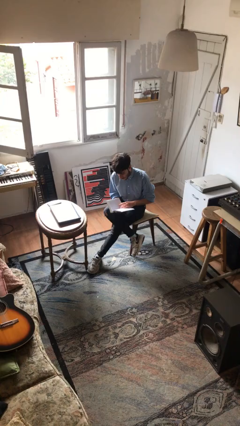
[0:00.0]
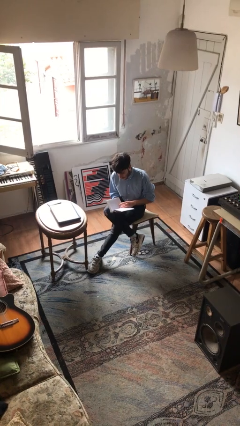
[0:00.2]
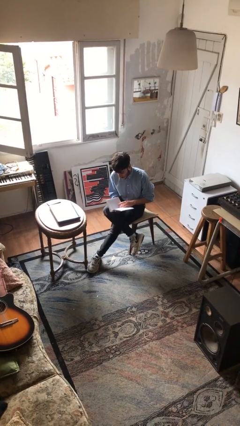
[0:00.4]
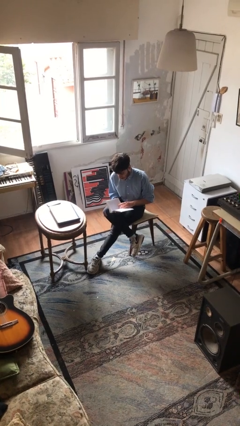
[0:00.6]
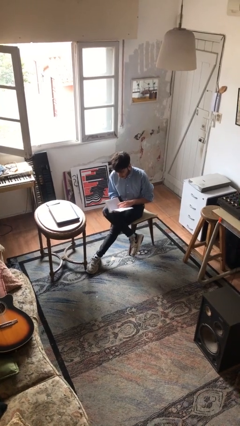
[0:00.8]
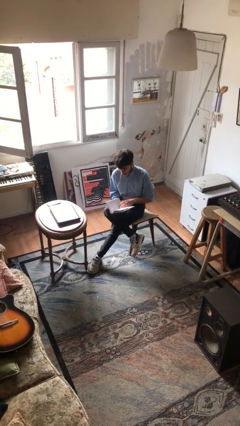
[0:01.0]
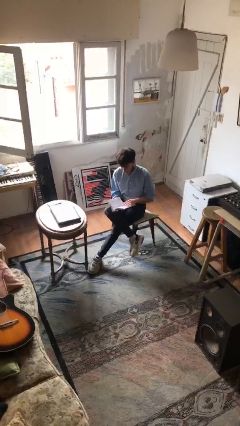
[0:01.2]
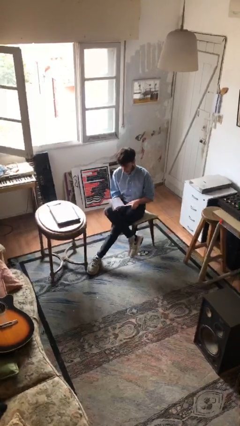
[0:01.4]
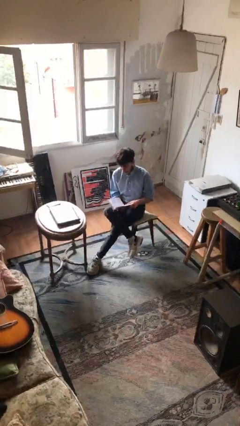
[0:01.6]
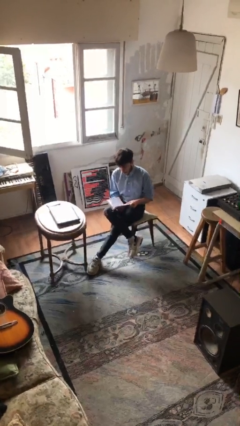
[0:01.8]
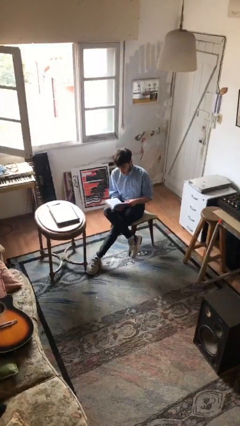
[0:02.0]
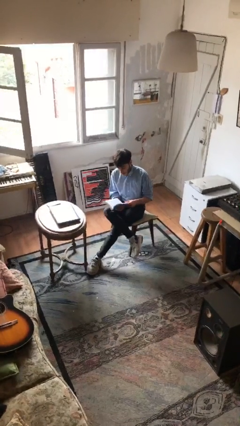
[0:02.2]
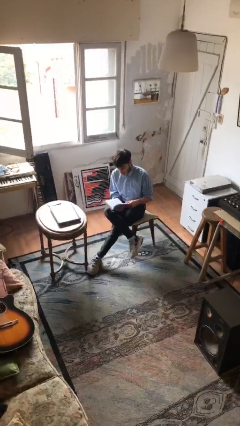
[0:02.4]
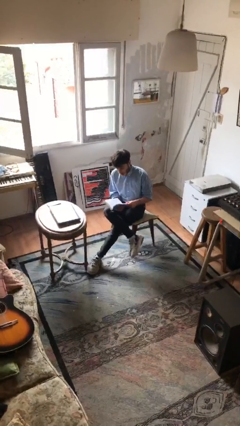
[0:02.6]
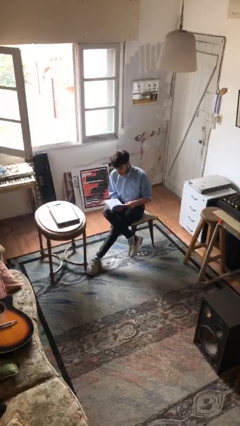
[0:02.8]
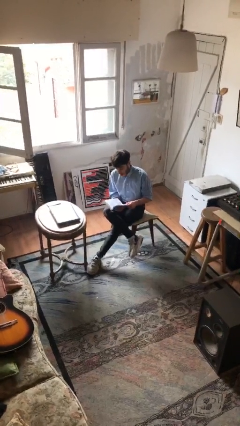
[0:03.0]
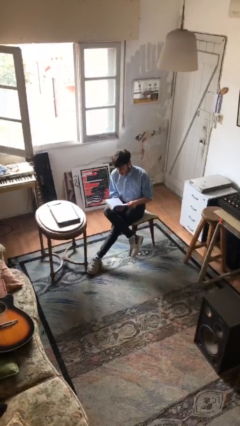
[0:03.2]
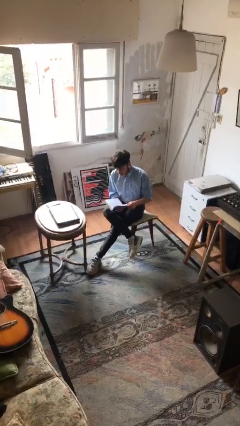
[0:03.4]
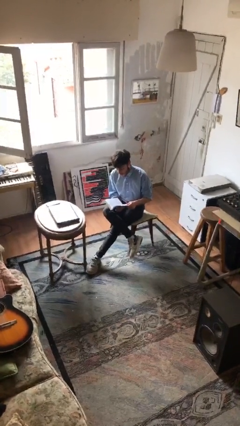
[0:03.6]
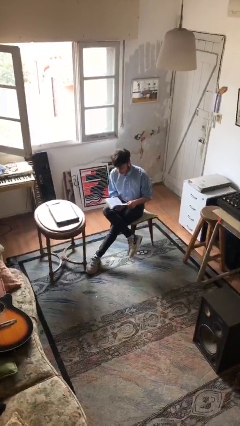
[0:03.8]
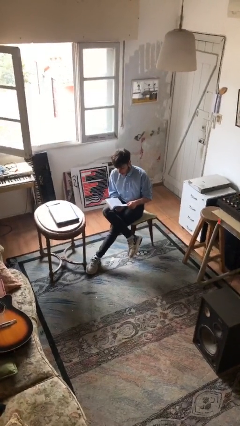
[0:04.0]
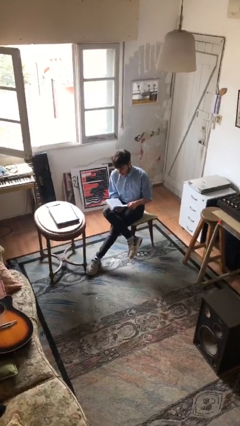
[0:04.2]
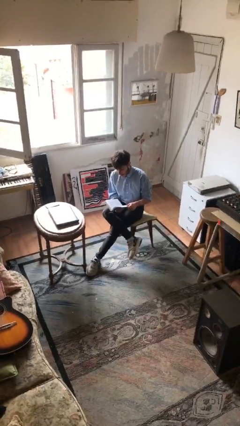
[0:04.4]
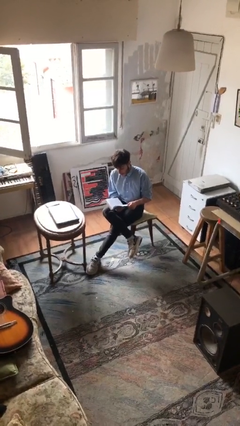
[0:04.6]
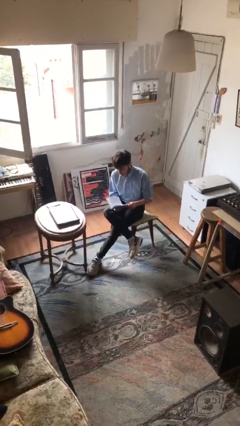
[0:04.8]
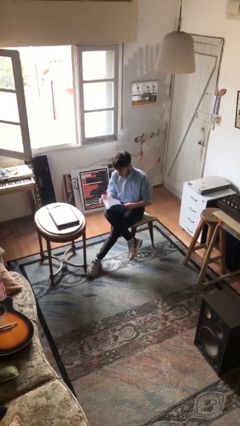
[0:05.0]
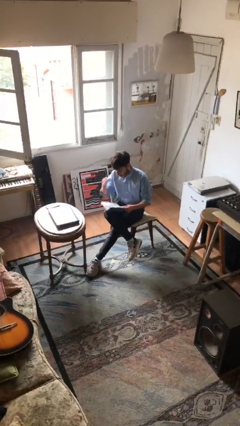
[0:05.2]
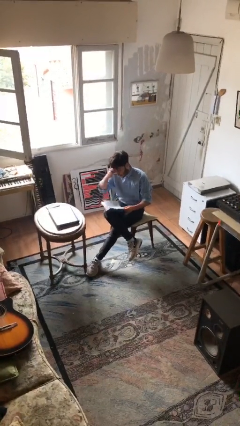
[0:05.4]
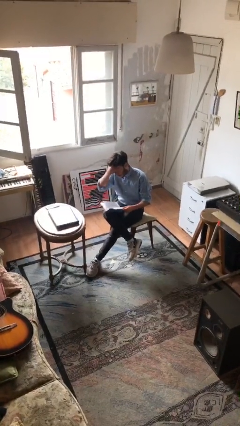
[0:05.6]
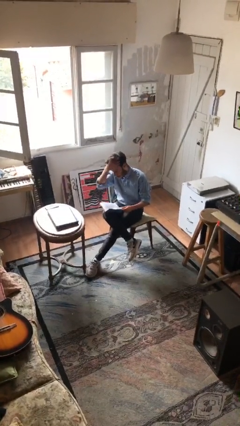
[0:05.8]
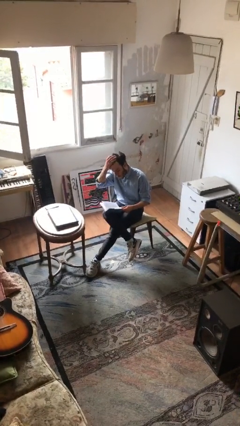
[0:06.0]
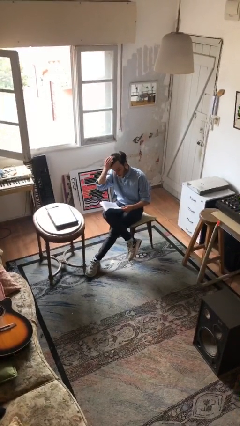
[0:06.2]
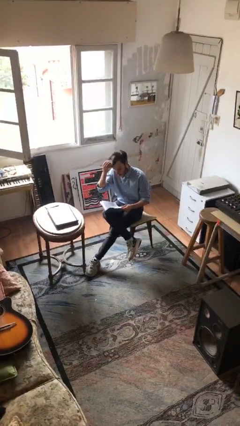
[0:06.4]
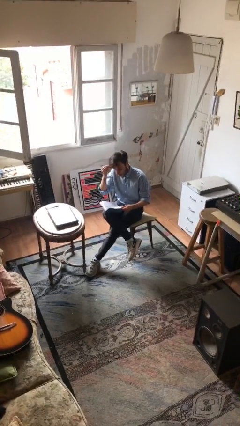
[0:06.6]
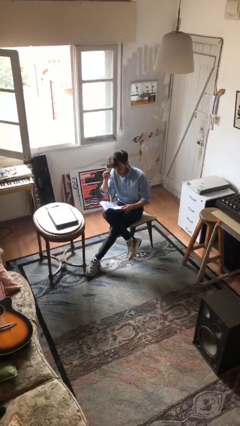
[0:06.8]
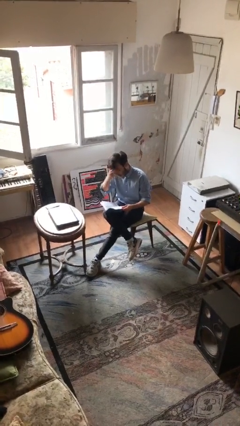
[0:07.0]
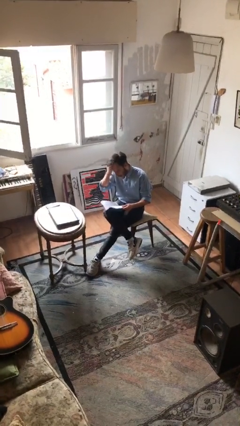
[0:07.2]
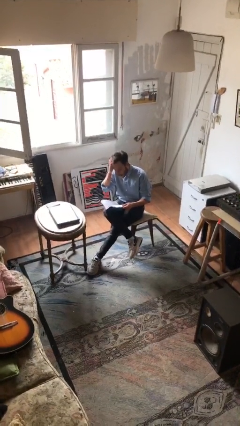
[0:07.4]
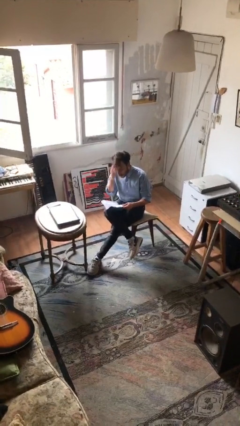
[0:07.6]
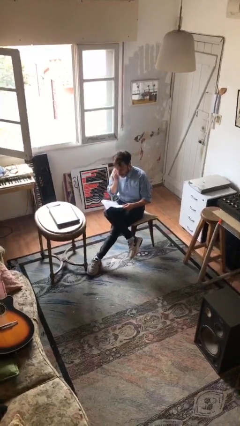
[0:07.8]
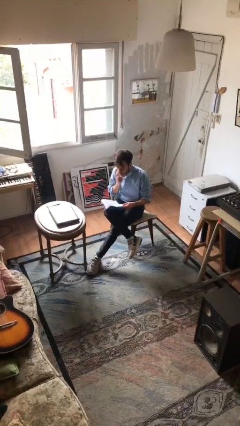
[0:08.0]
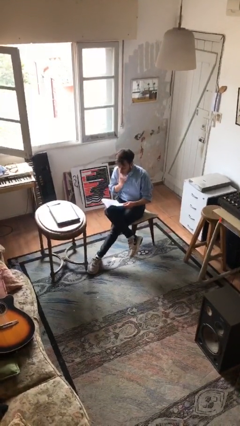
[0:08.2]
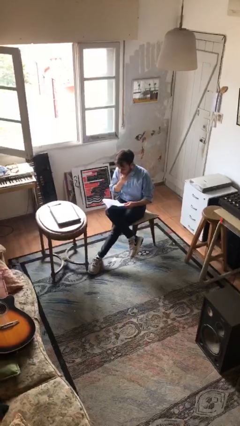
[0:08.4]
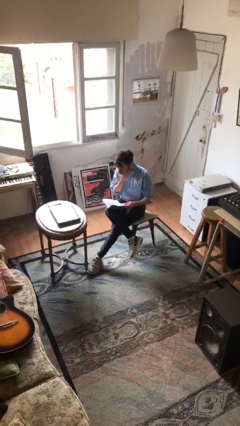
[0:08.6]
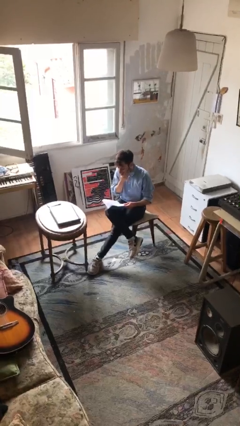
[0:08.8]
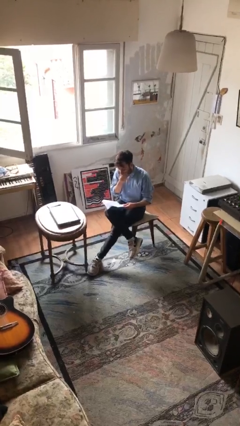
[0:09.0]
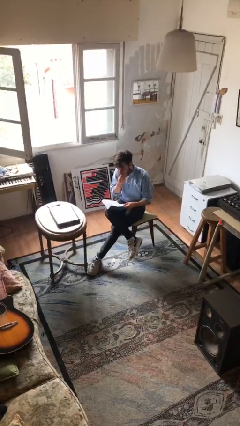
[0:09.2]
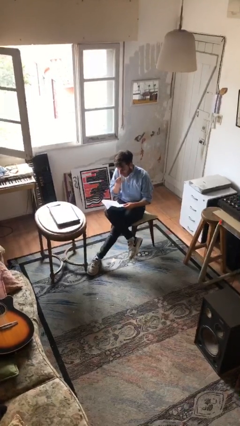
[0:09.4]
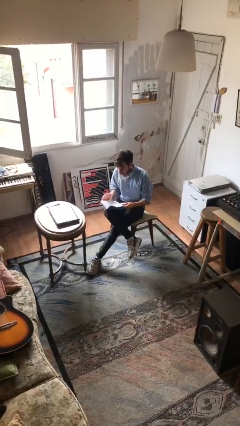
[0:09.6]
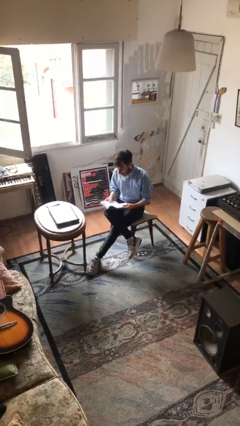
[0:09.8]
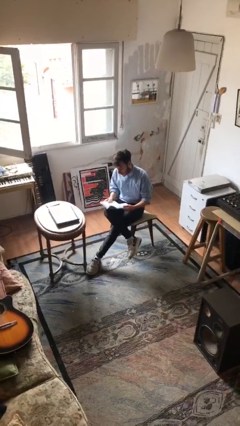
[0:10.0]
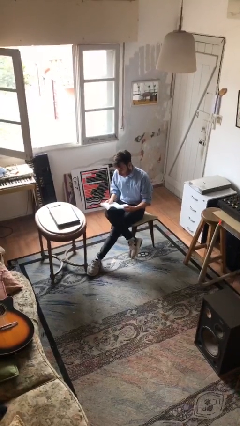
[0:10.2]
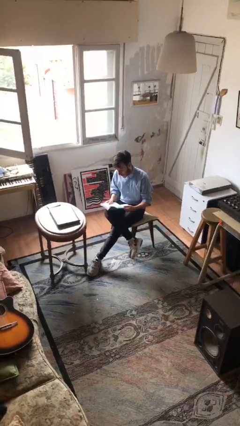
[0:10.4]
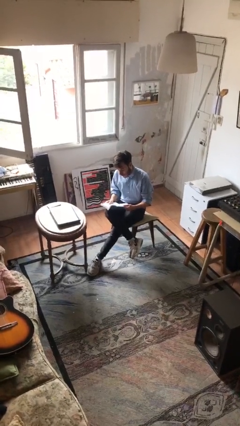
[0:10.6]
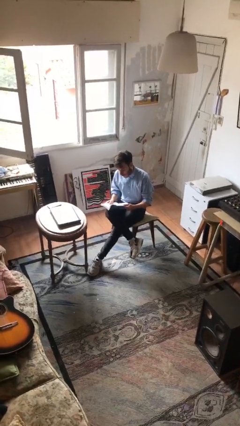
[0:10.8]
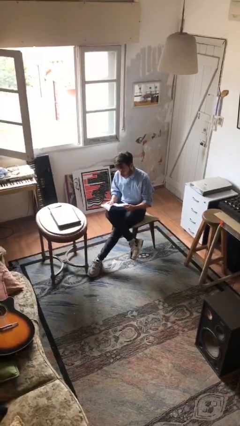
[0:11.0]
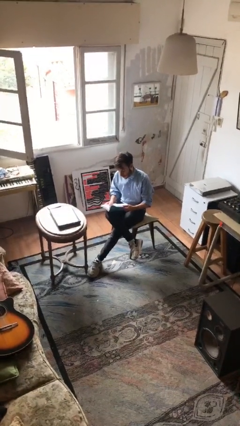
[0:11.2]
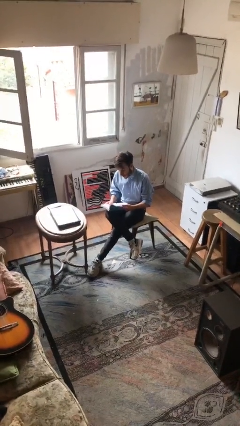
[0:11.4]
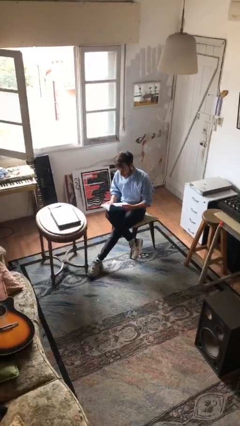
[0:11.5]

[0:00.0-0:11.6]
person reads document

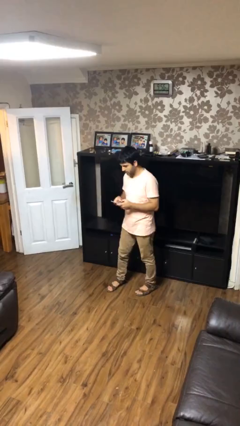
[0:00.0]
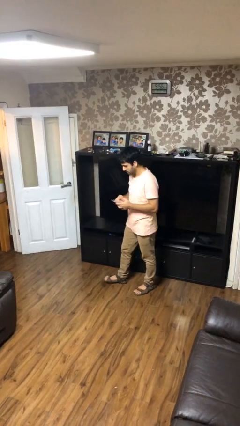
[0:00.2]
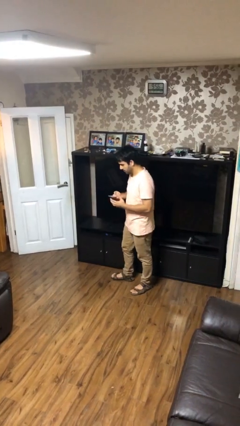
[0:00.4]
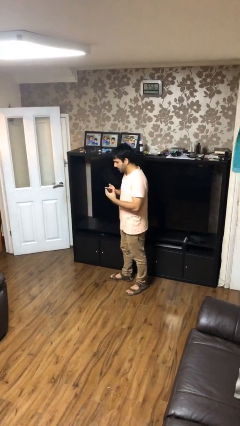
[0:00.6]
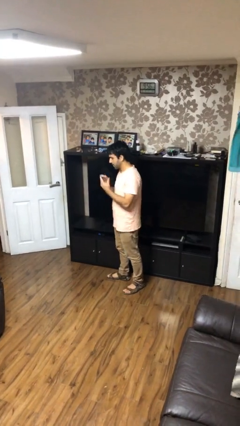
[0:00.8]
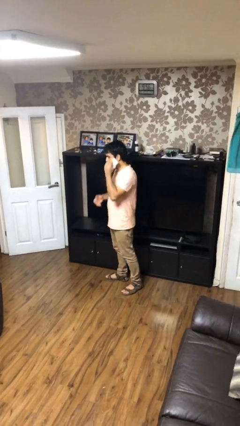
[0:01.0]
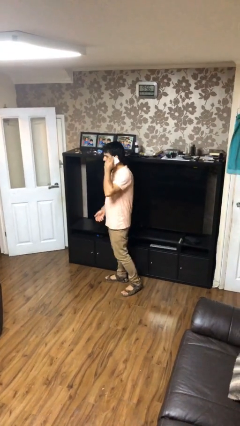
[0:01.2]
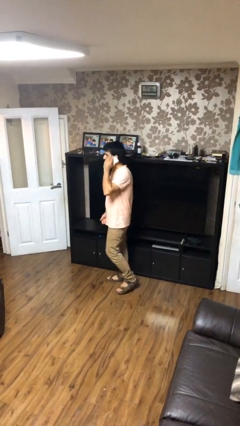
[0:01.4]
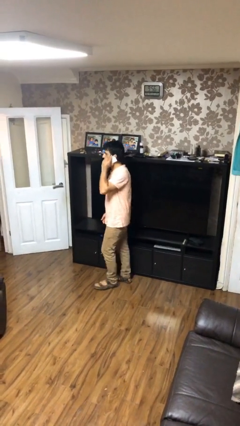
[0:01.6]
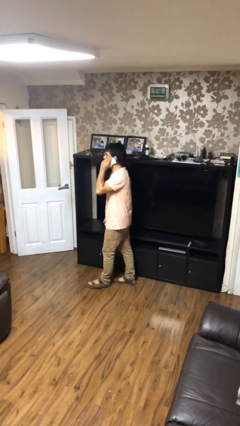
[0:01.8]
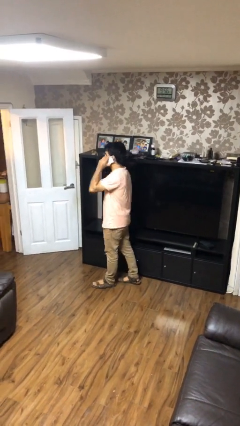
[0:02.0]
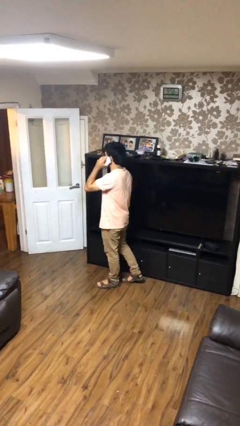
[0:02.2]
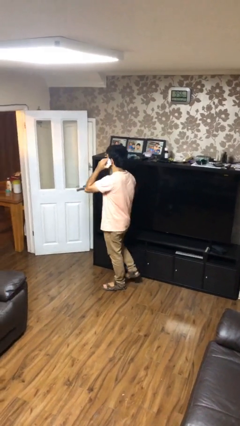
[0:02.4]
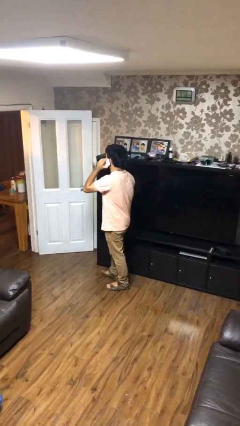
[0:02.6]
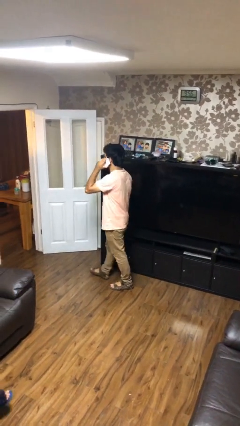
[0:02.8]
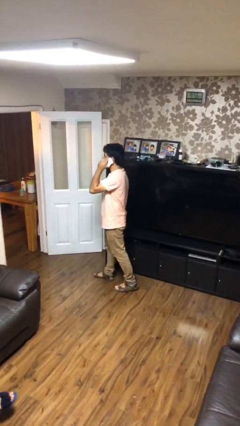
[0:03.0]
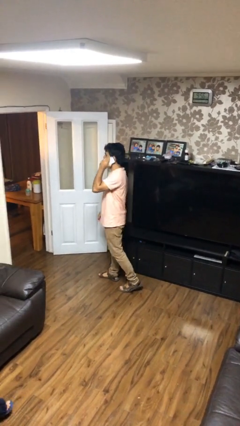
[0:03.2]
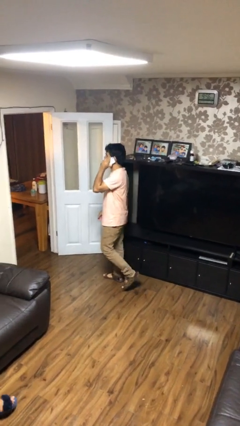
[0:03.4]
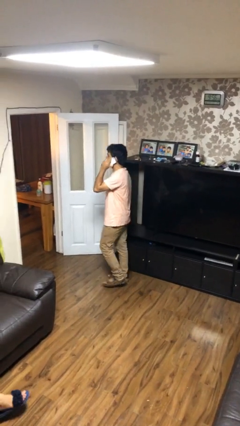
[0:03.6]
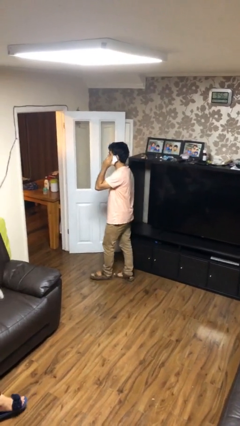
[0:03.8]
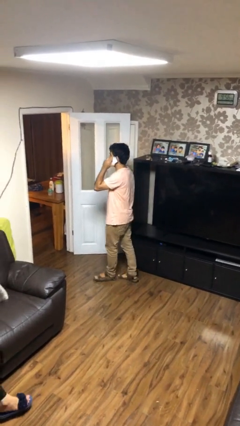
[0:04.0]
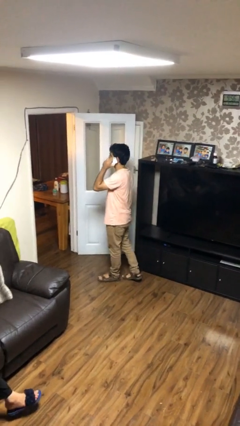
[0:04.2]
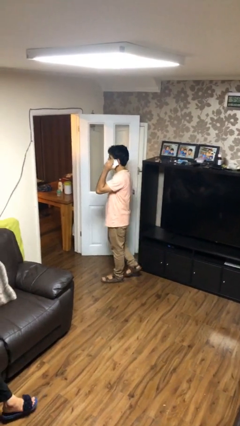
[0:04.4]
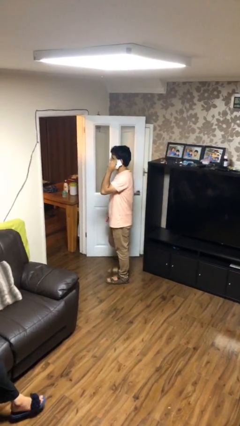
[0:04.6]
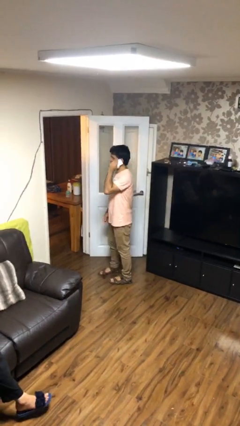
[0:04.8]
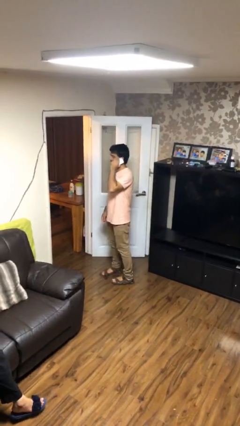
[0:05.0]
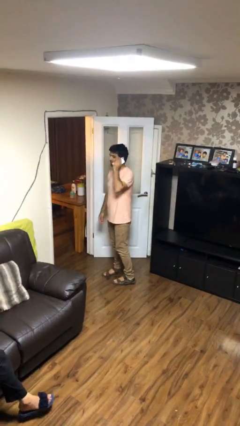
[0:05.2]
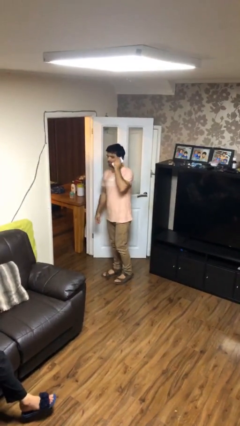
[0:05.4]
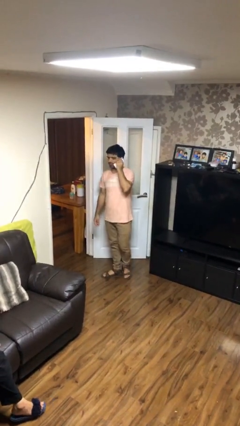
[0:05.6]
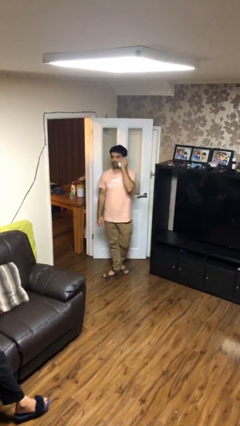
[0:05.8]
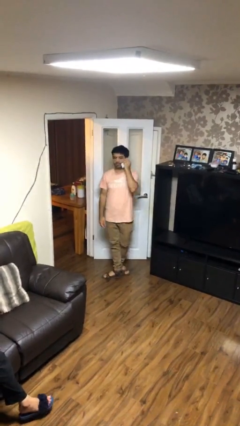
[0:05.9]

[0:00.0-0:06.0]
person talks on phone

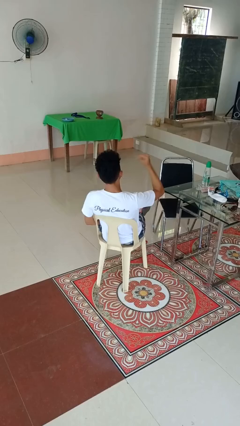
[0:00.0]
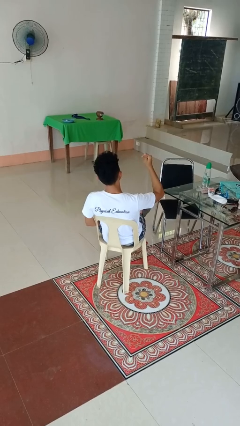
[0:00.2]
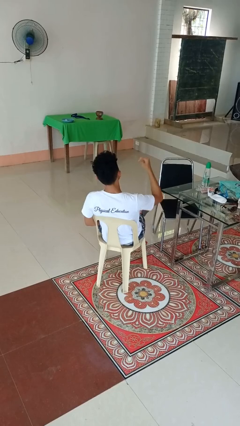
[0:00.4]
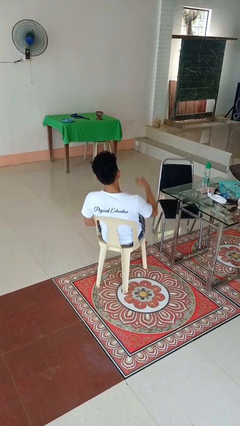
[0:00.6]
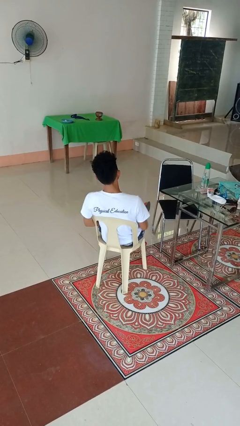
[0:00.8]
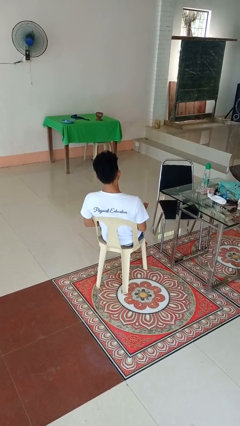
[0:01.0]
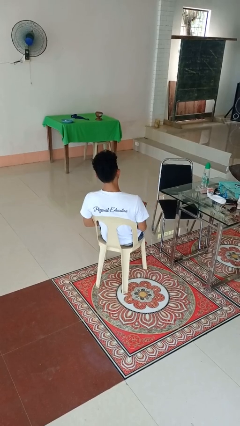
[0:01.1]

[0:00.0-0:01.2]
person snaps fingers
